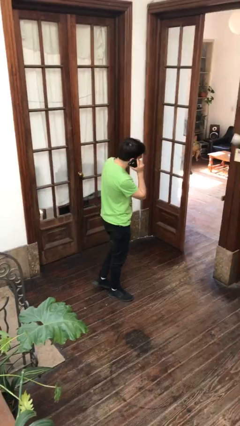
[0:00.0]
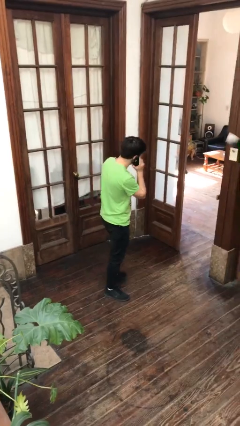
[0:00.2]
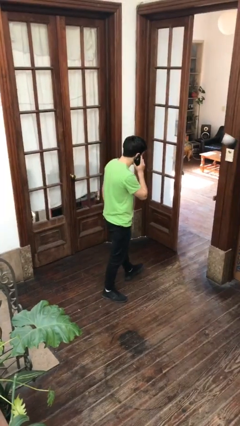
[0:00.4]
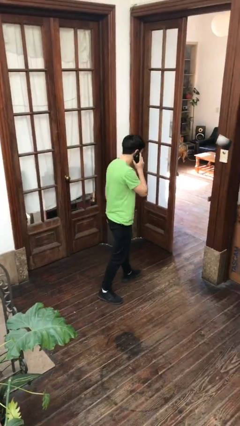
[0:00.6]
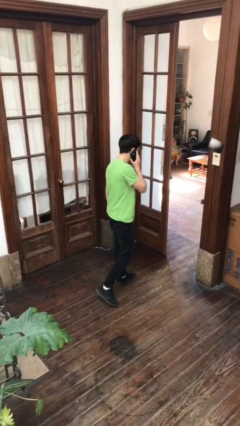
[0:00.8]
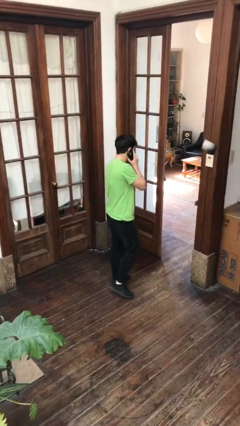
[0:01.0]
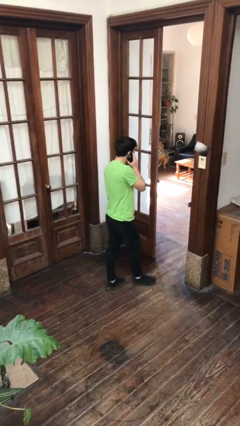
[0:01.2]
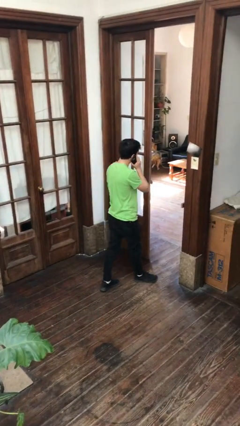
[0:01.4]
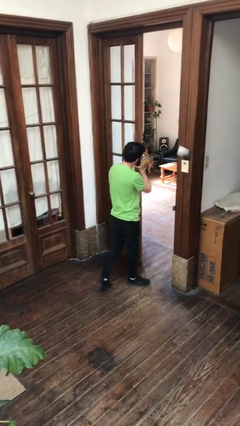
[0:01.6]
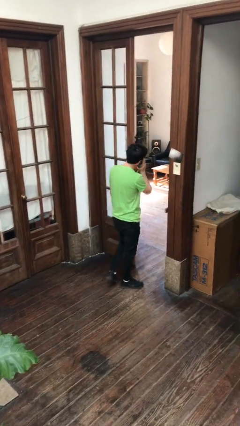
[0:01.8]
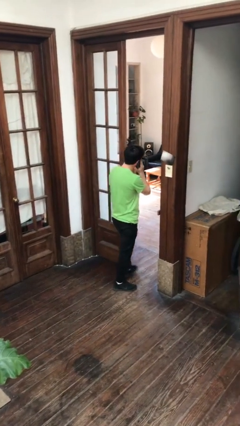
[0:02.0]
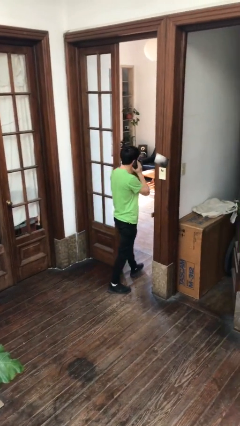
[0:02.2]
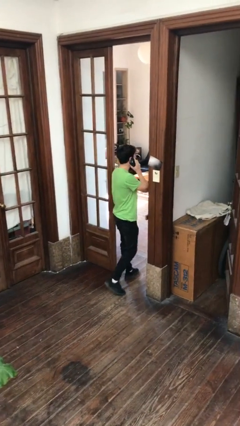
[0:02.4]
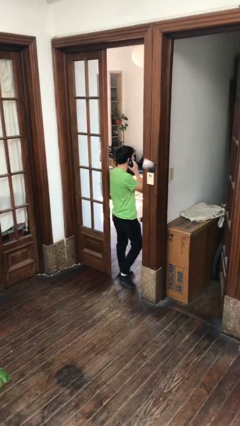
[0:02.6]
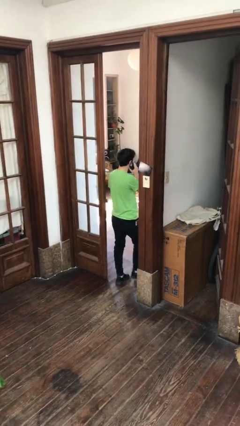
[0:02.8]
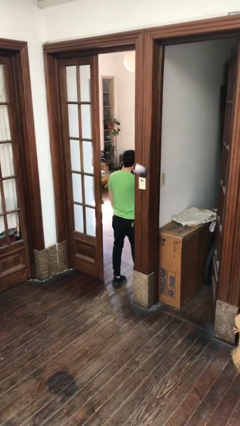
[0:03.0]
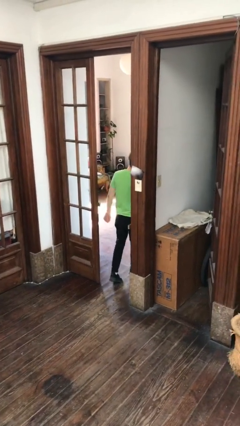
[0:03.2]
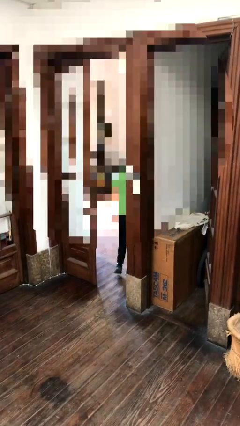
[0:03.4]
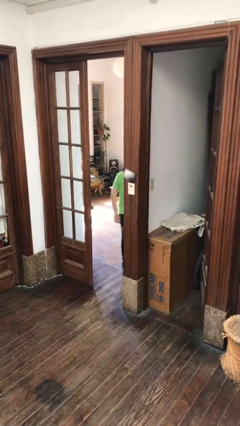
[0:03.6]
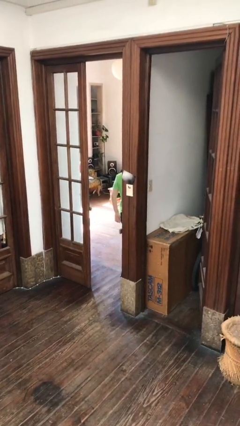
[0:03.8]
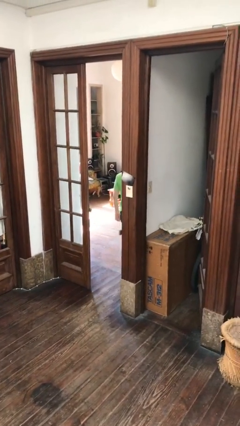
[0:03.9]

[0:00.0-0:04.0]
person exits scene through structure

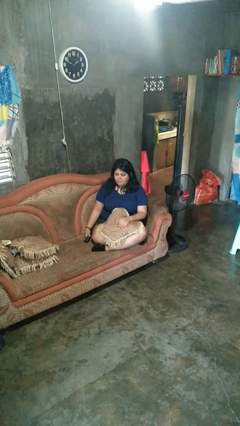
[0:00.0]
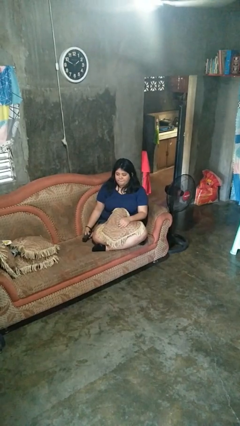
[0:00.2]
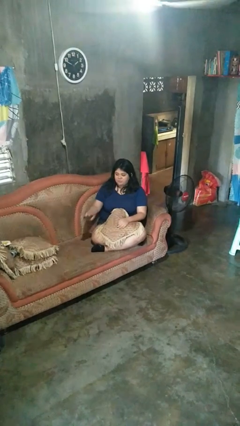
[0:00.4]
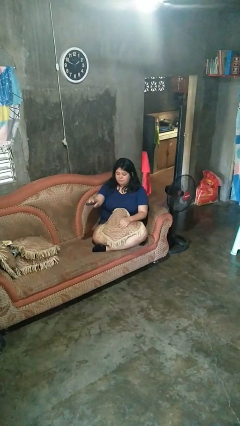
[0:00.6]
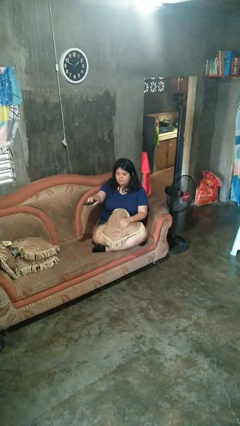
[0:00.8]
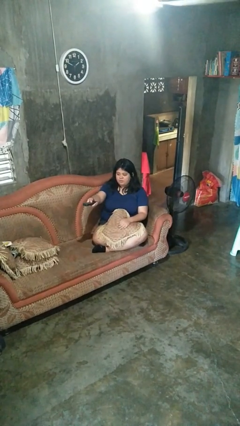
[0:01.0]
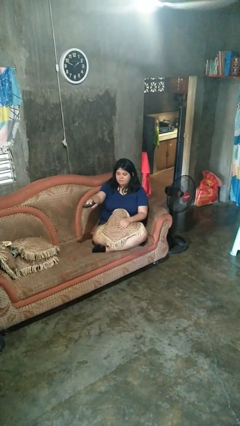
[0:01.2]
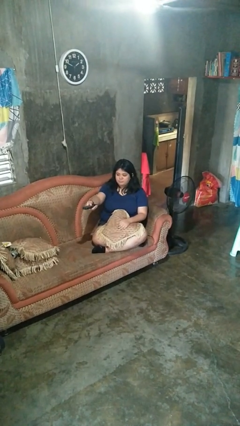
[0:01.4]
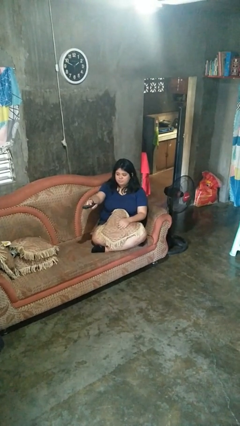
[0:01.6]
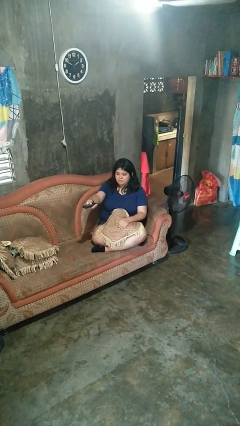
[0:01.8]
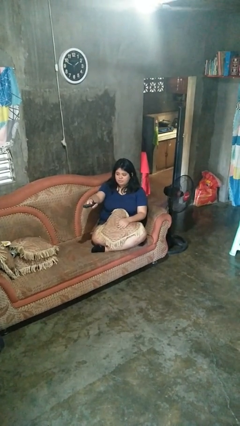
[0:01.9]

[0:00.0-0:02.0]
person uses television remote

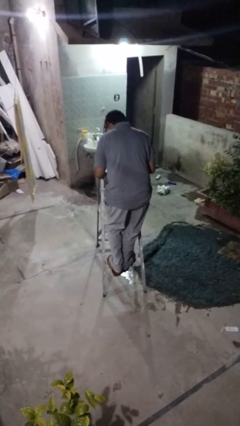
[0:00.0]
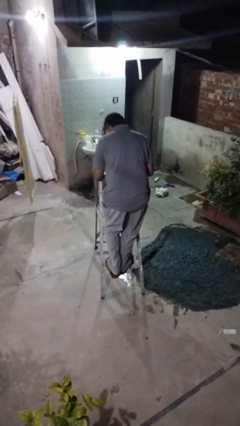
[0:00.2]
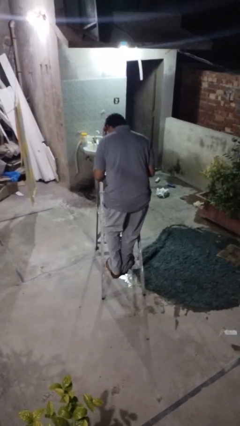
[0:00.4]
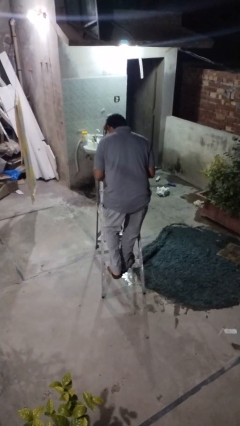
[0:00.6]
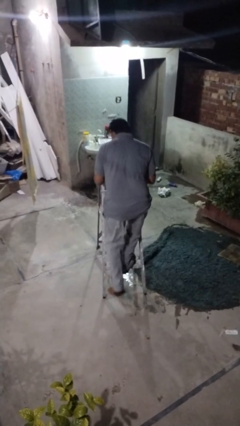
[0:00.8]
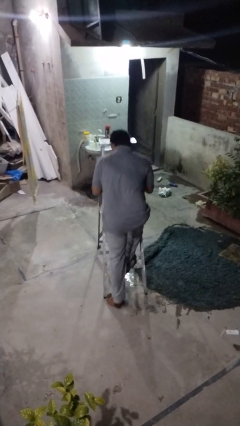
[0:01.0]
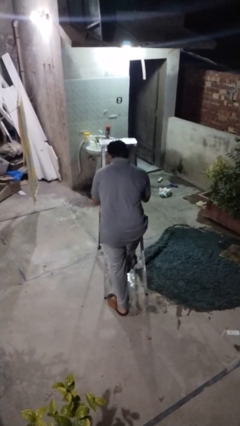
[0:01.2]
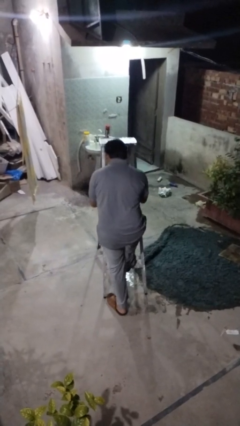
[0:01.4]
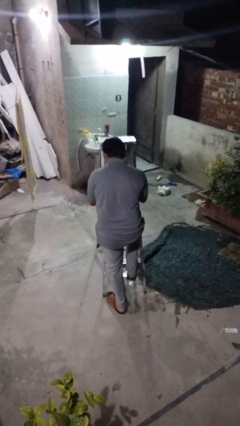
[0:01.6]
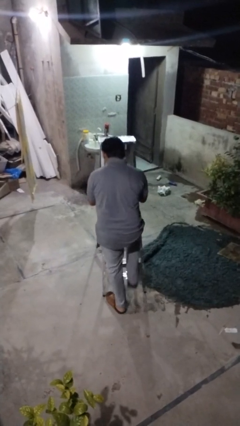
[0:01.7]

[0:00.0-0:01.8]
person climbs down ladder

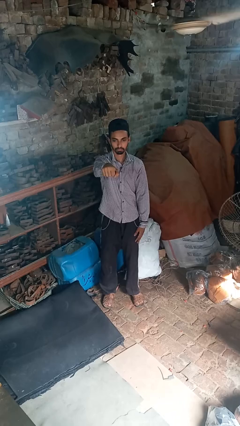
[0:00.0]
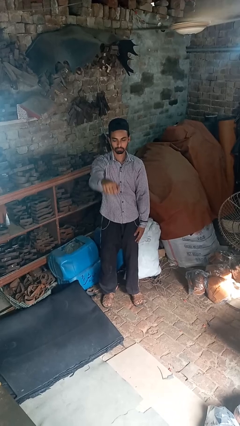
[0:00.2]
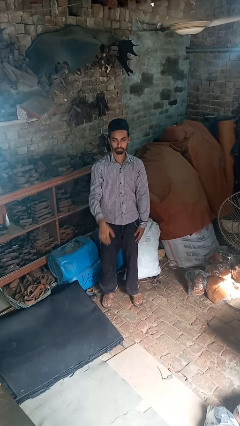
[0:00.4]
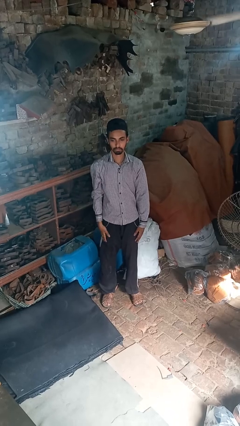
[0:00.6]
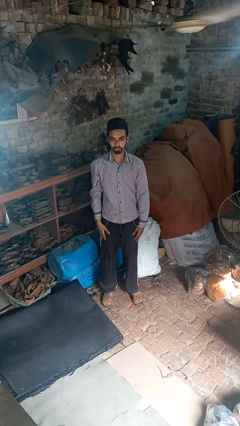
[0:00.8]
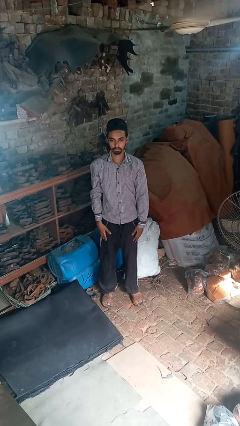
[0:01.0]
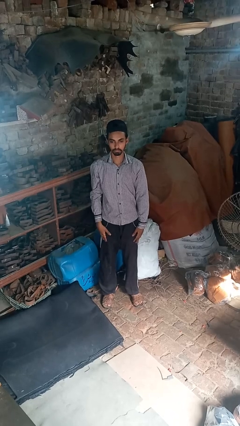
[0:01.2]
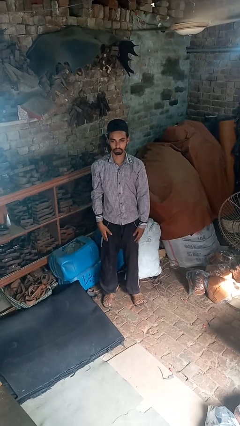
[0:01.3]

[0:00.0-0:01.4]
person punches

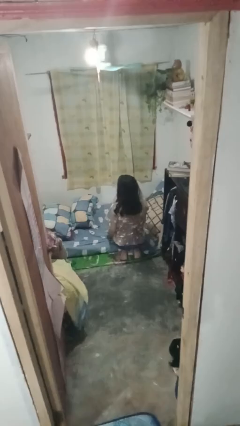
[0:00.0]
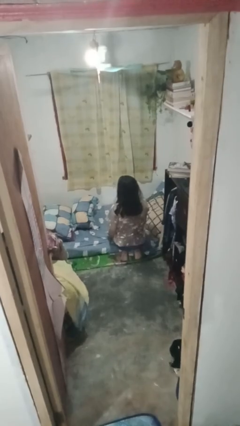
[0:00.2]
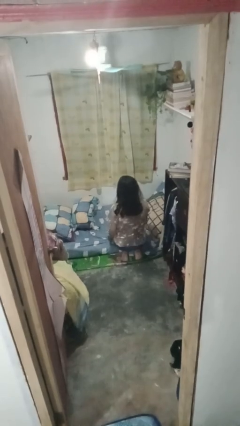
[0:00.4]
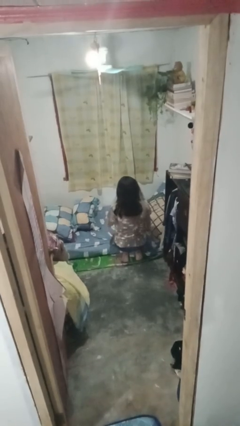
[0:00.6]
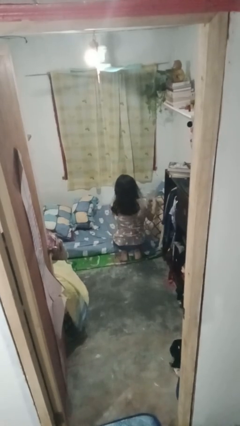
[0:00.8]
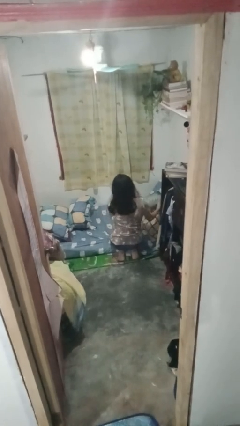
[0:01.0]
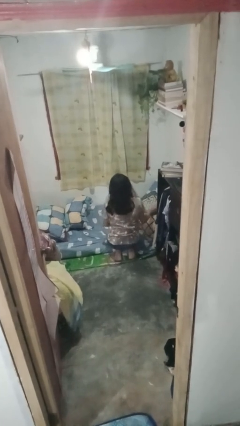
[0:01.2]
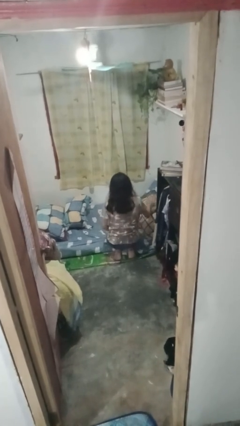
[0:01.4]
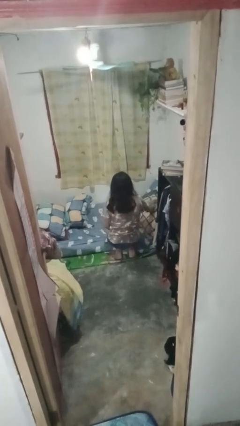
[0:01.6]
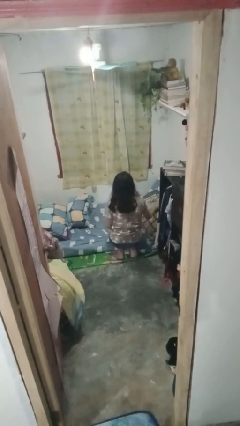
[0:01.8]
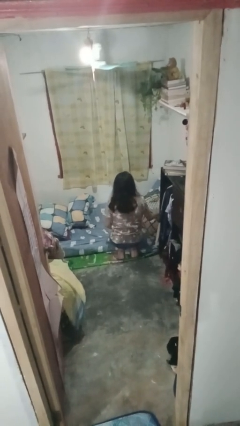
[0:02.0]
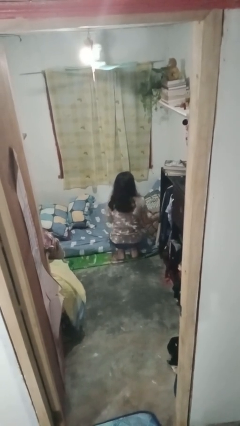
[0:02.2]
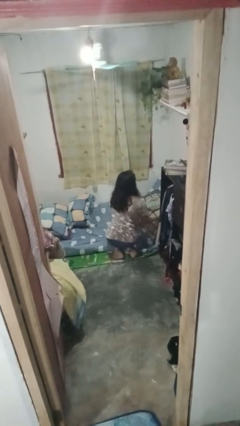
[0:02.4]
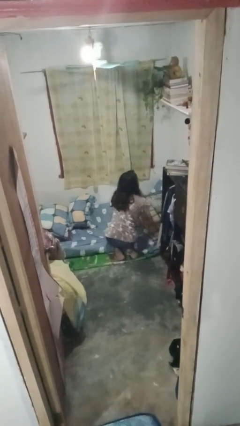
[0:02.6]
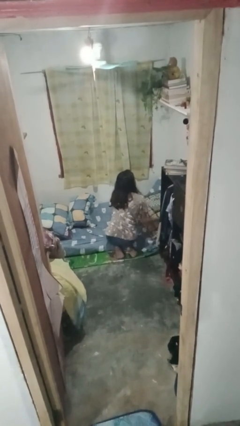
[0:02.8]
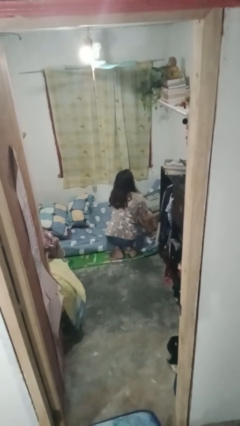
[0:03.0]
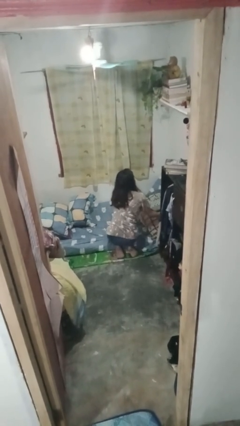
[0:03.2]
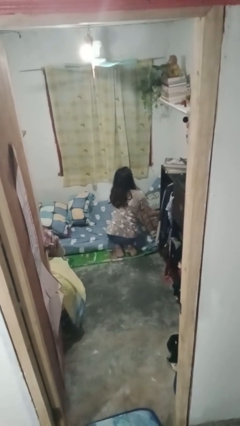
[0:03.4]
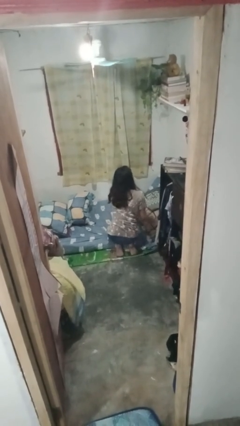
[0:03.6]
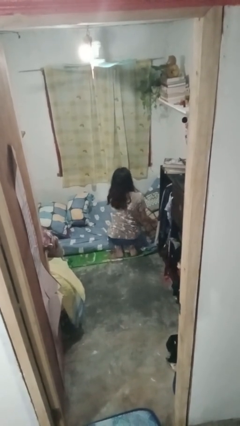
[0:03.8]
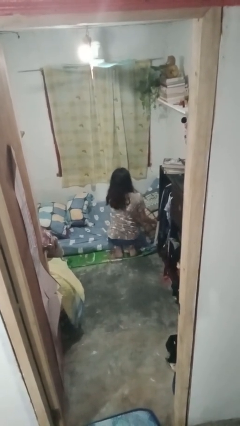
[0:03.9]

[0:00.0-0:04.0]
person makes bed

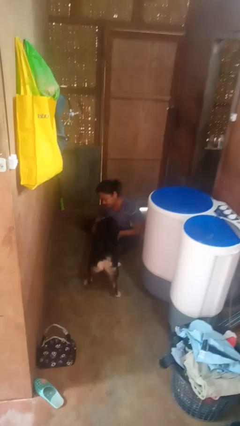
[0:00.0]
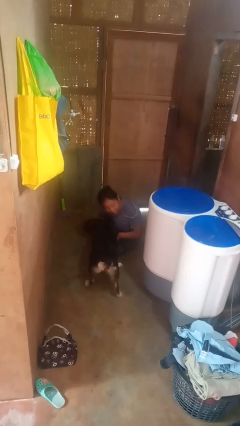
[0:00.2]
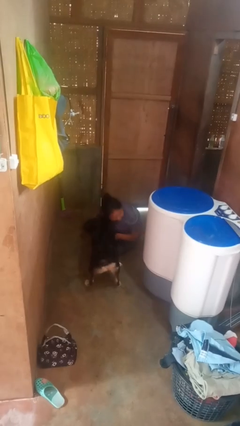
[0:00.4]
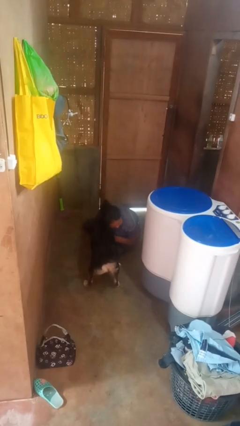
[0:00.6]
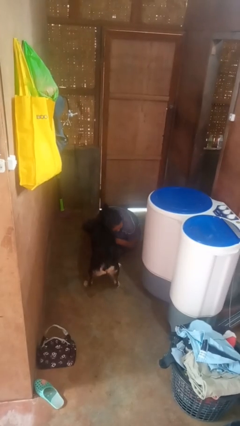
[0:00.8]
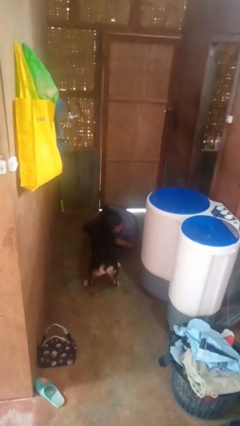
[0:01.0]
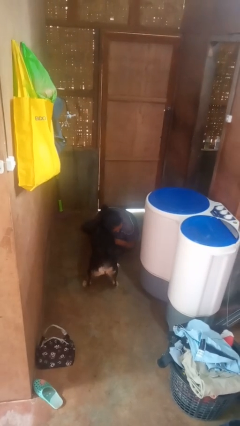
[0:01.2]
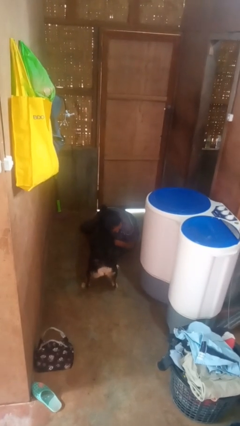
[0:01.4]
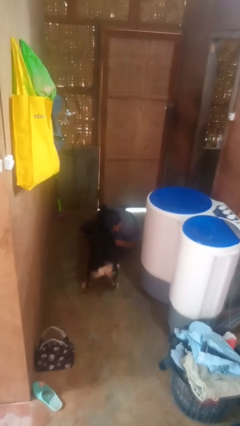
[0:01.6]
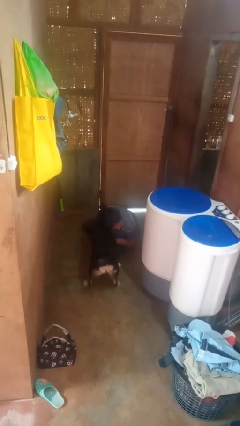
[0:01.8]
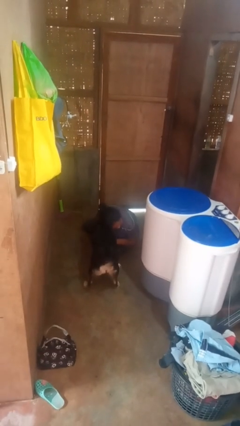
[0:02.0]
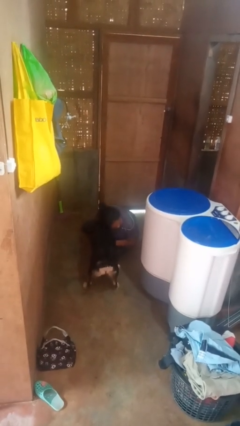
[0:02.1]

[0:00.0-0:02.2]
person hugs dog

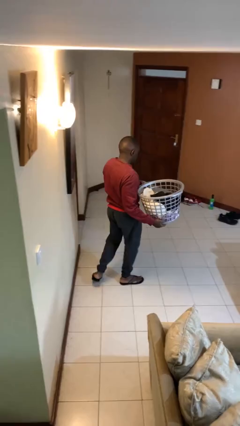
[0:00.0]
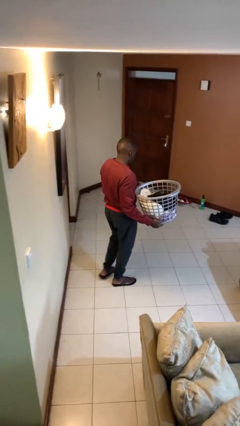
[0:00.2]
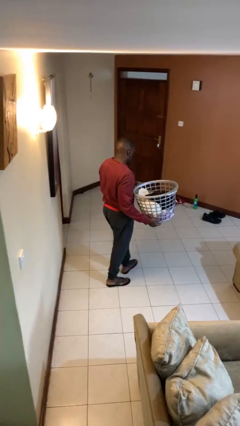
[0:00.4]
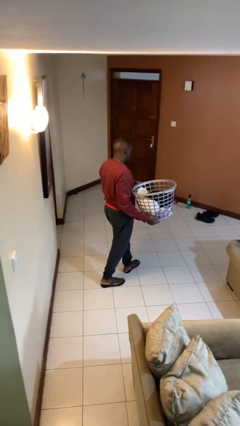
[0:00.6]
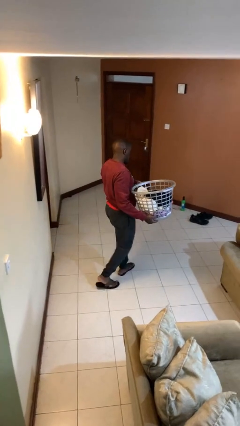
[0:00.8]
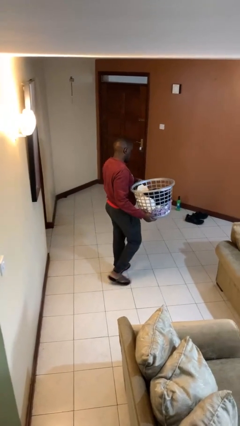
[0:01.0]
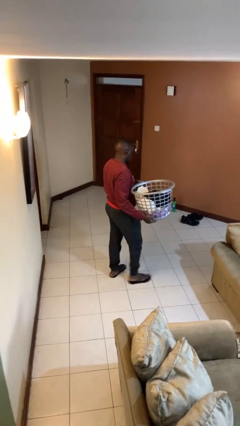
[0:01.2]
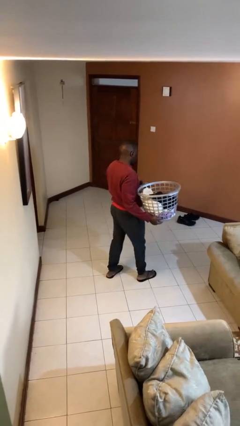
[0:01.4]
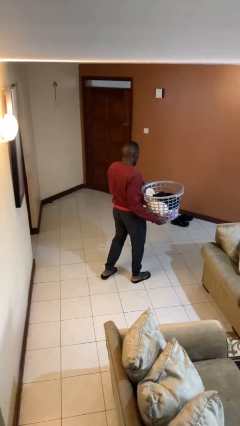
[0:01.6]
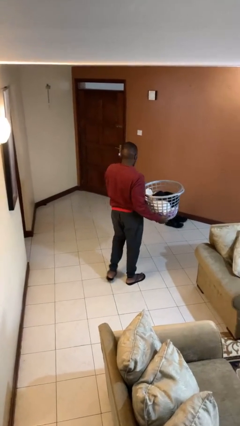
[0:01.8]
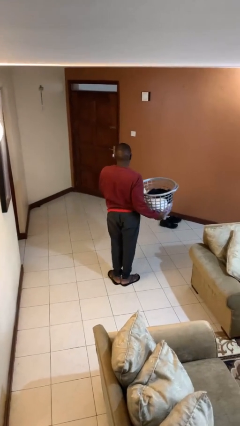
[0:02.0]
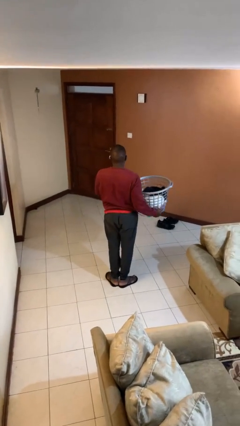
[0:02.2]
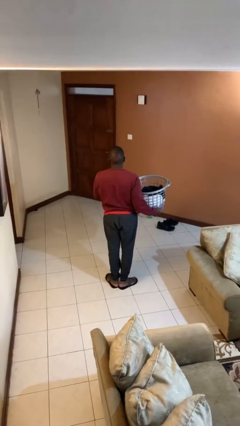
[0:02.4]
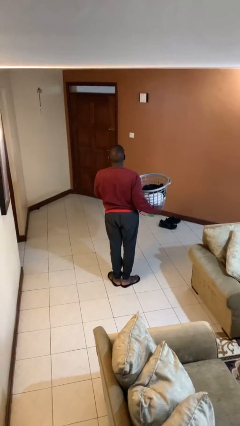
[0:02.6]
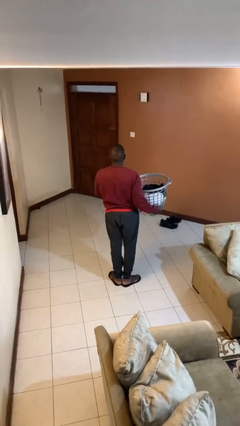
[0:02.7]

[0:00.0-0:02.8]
person carries laundry basket
